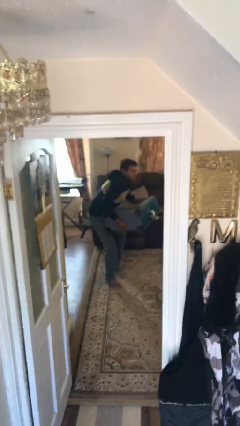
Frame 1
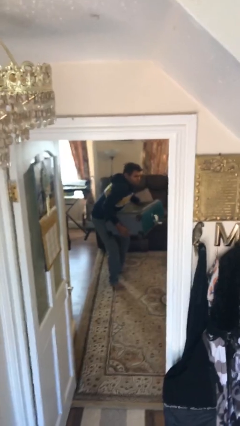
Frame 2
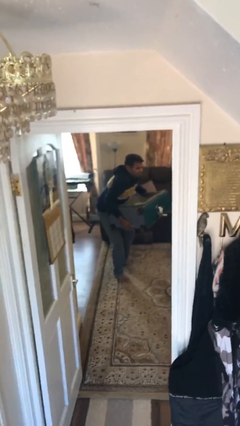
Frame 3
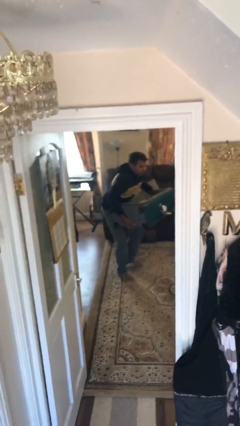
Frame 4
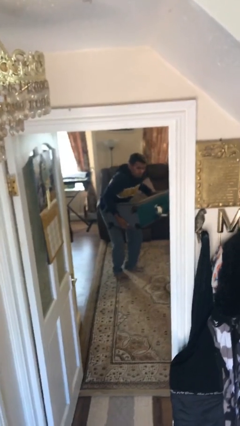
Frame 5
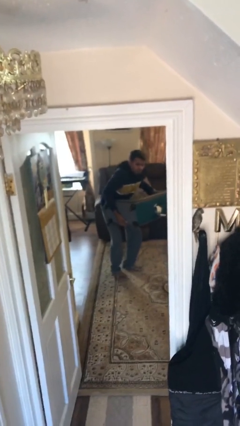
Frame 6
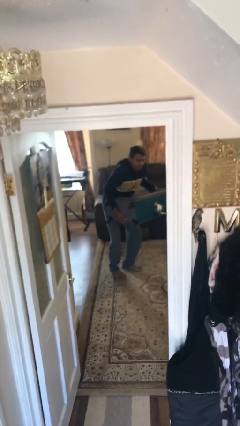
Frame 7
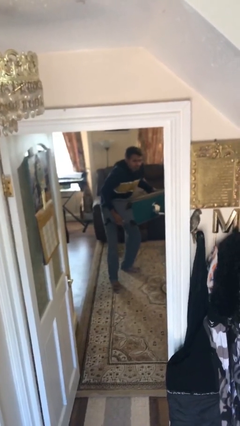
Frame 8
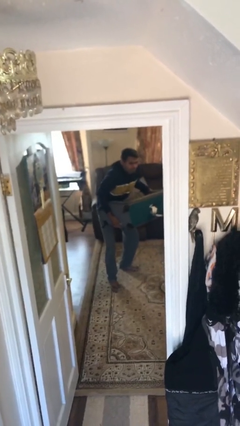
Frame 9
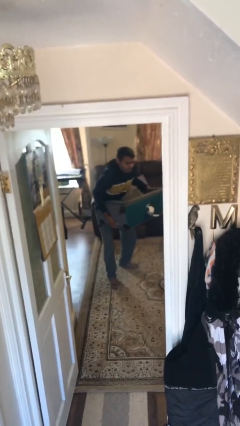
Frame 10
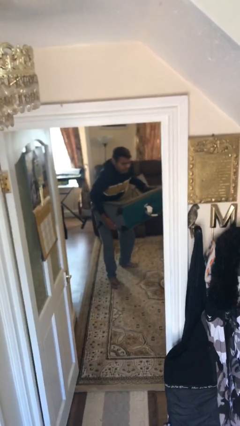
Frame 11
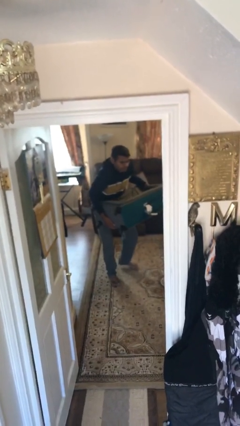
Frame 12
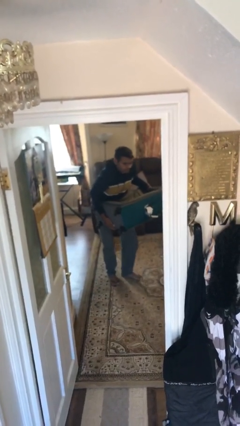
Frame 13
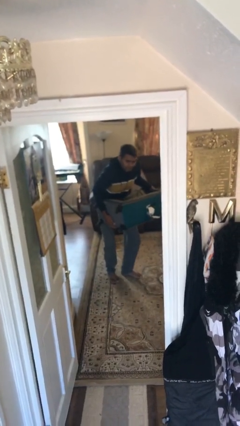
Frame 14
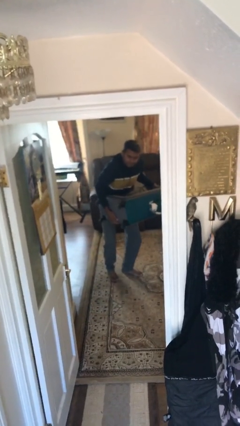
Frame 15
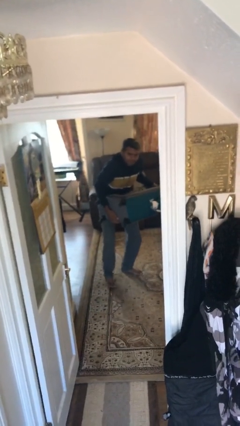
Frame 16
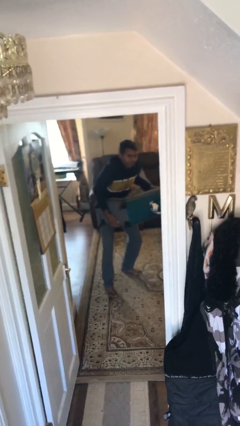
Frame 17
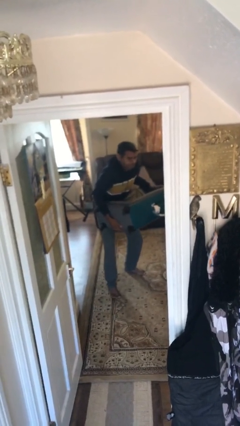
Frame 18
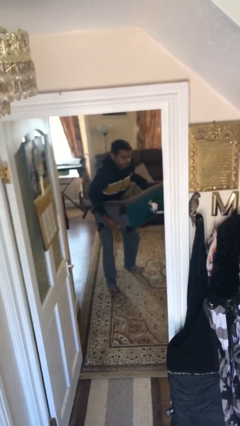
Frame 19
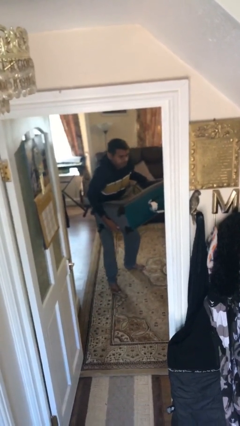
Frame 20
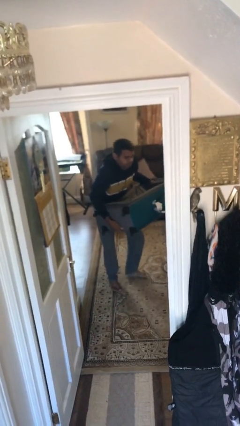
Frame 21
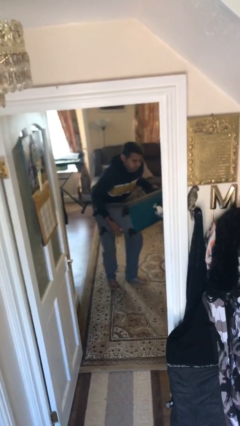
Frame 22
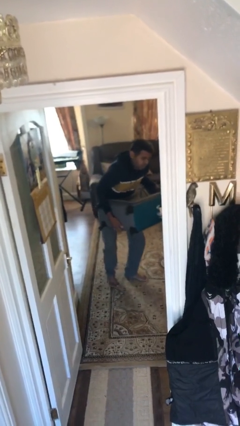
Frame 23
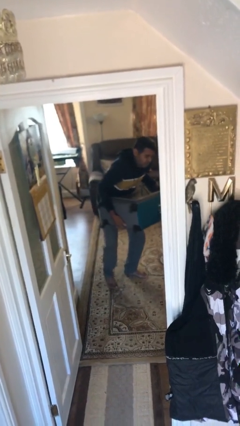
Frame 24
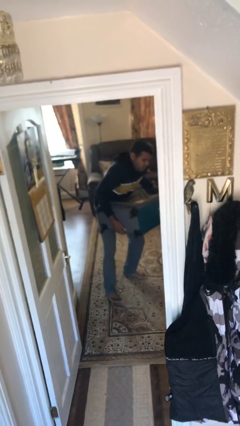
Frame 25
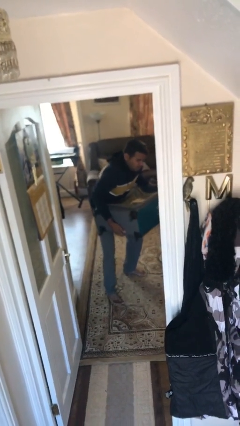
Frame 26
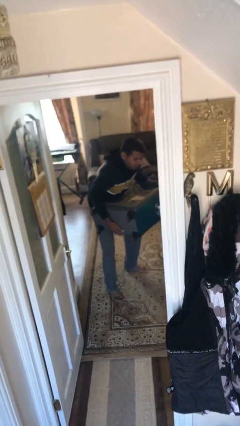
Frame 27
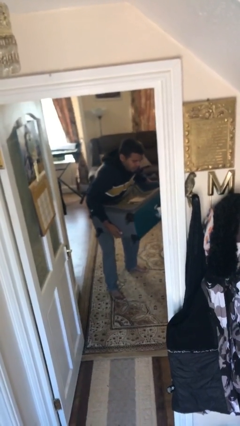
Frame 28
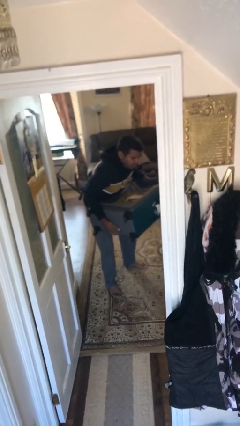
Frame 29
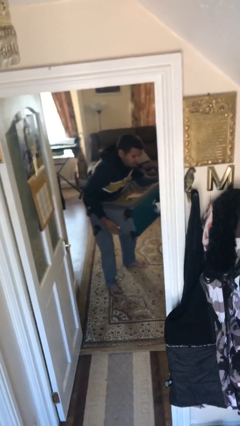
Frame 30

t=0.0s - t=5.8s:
person carries heavy object

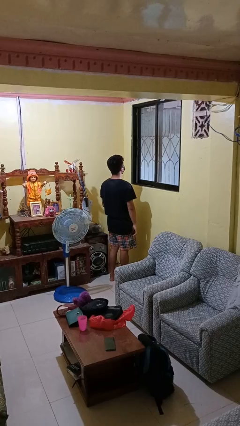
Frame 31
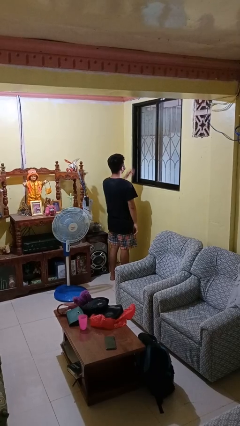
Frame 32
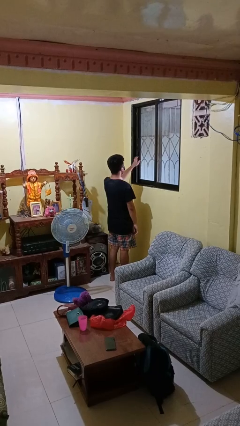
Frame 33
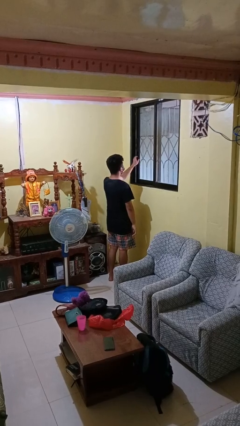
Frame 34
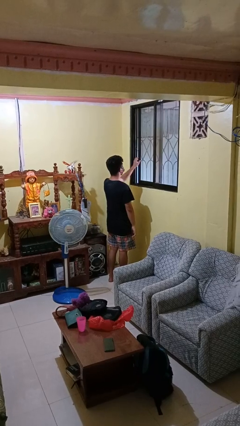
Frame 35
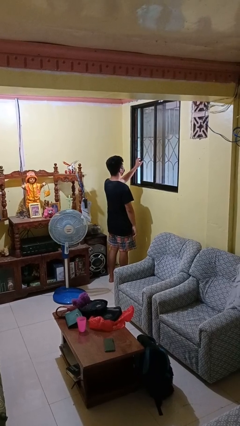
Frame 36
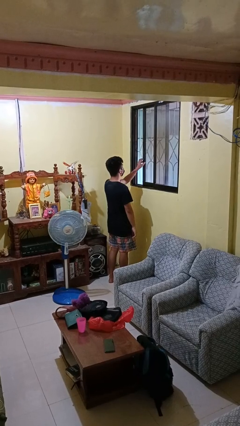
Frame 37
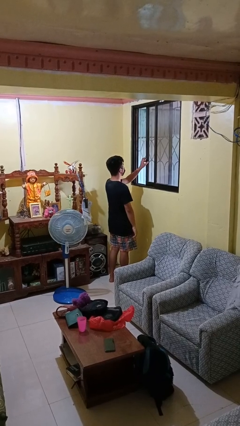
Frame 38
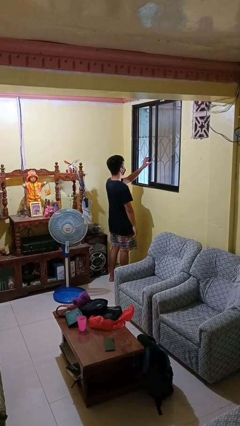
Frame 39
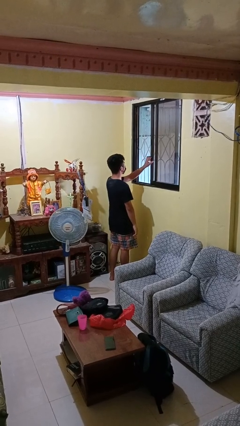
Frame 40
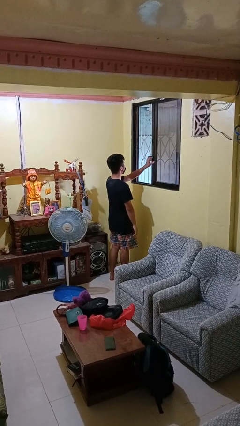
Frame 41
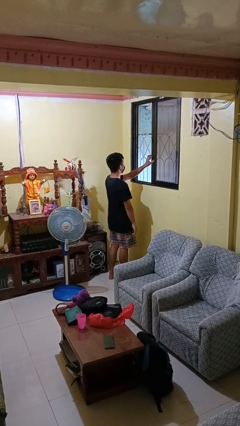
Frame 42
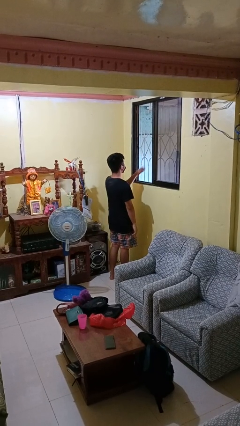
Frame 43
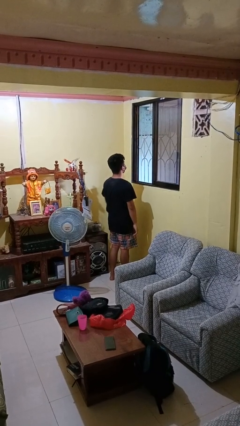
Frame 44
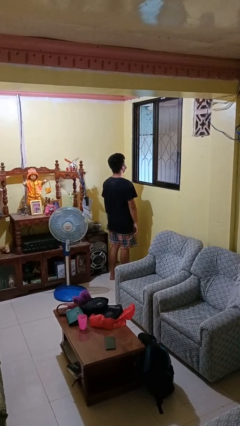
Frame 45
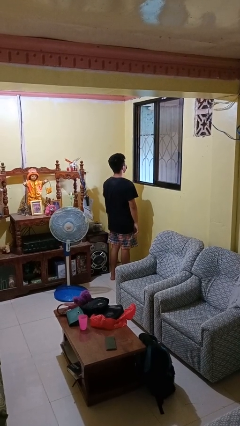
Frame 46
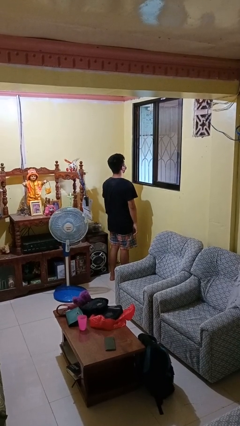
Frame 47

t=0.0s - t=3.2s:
person opens home window

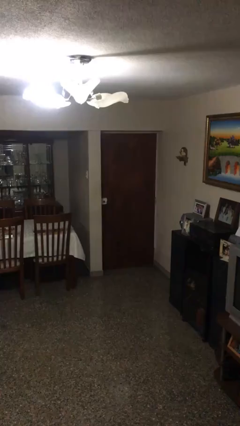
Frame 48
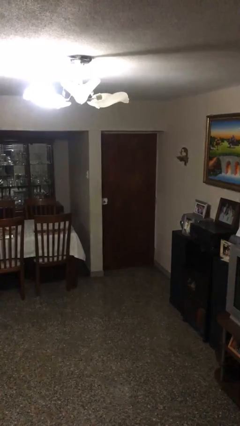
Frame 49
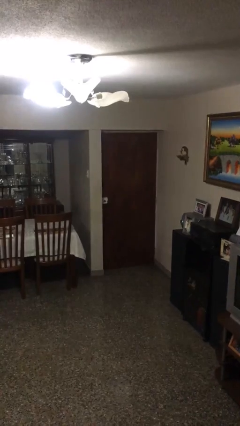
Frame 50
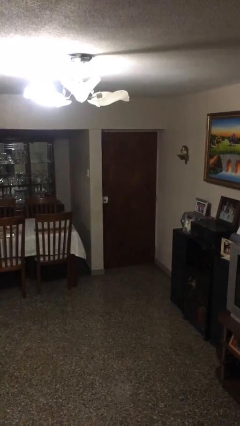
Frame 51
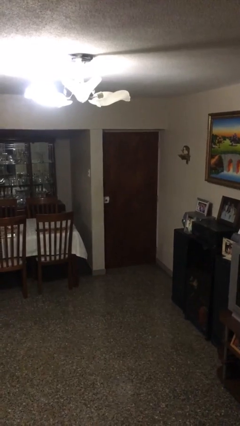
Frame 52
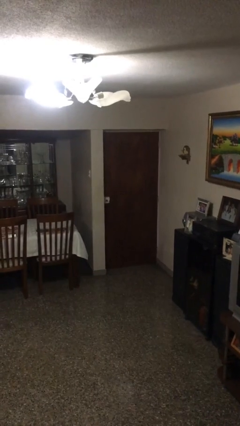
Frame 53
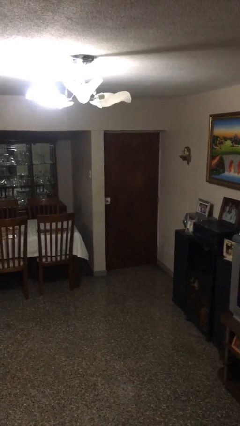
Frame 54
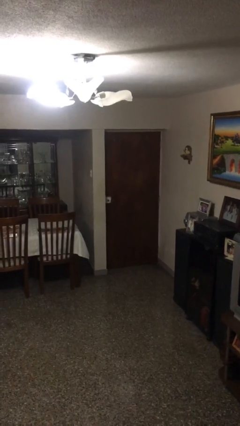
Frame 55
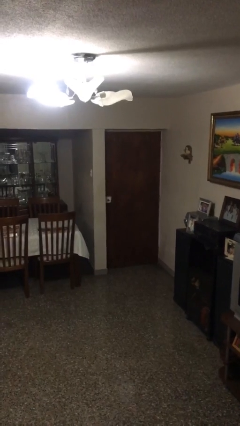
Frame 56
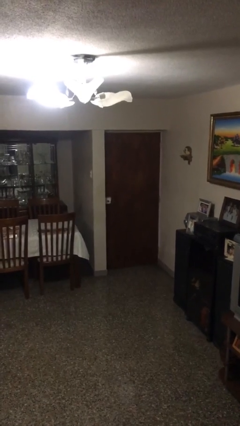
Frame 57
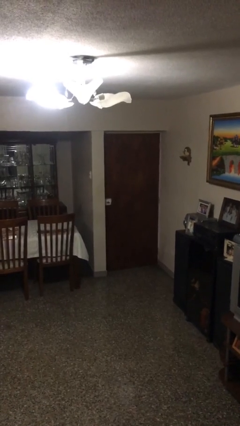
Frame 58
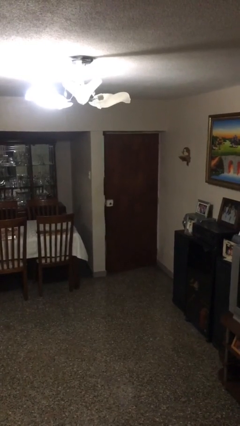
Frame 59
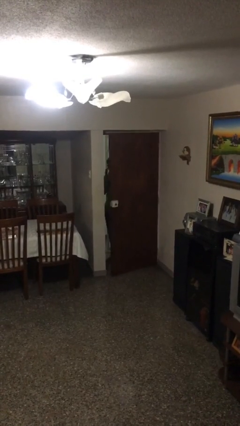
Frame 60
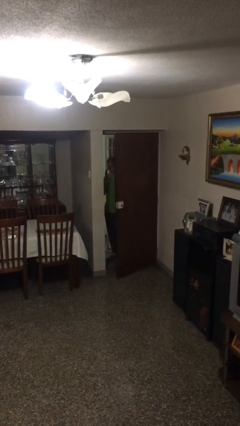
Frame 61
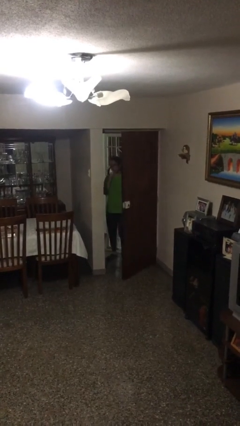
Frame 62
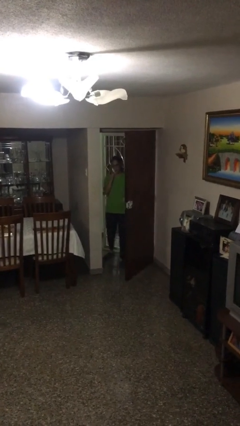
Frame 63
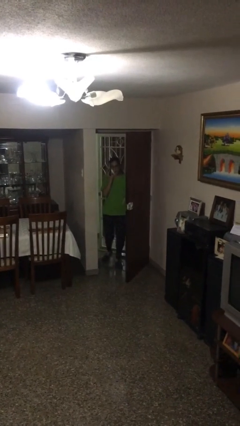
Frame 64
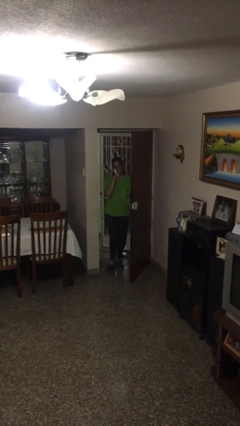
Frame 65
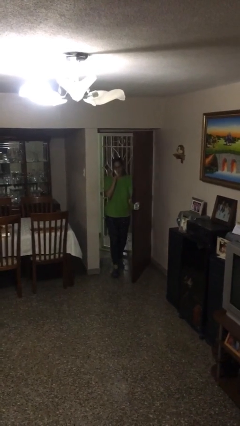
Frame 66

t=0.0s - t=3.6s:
person opens facility door

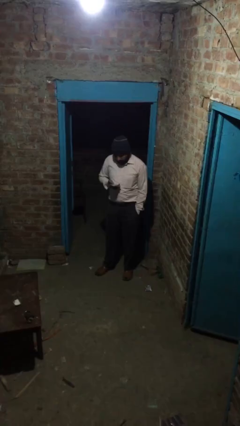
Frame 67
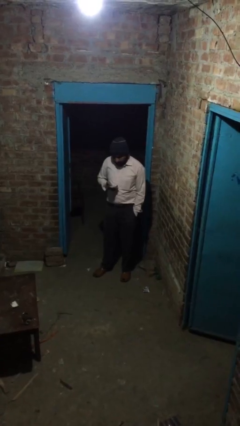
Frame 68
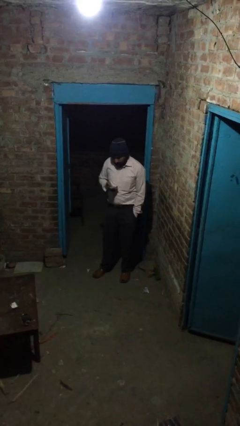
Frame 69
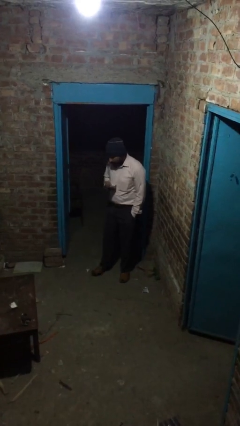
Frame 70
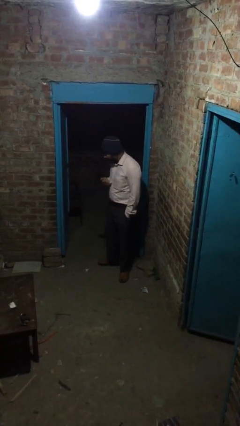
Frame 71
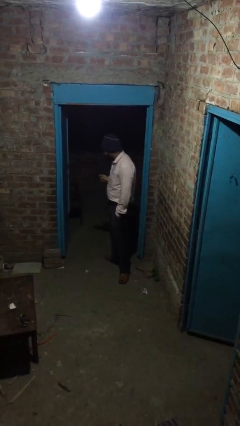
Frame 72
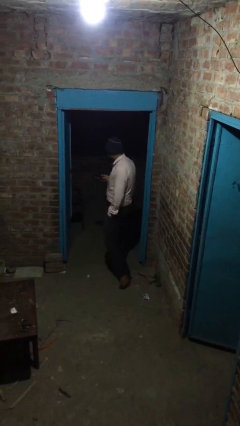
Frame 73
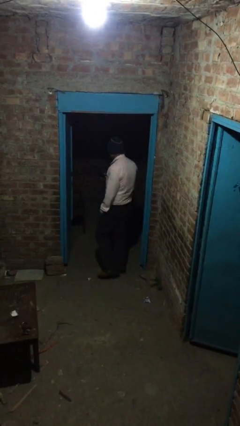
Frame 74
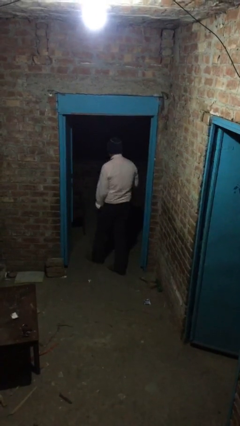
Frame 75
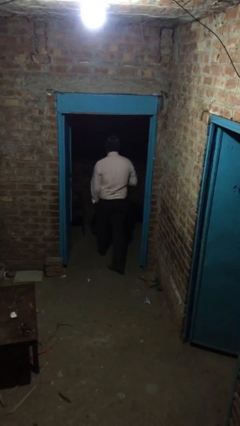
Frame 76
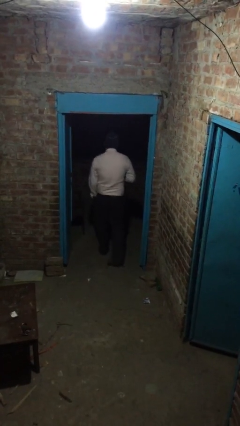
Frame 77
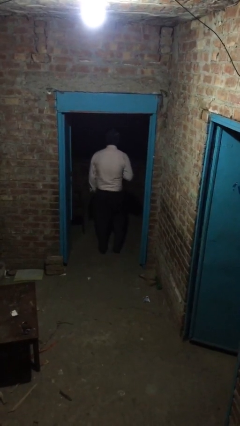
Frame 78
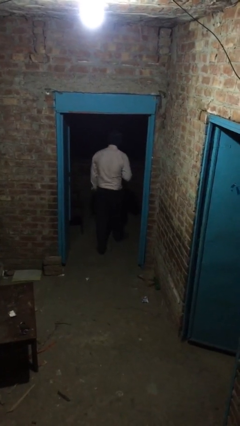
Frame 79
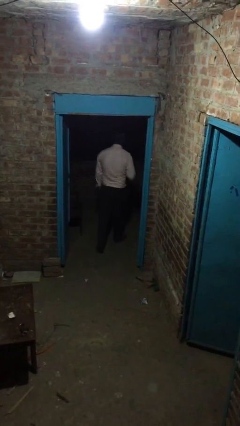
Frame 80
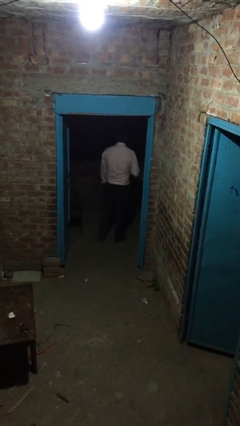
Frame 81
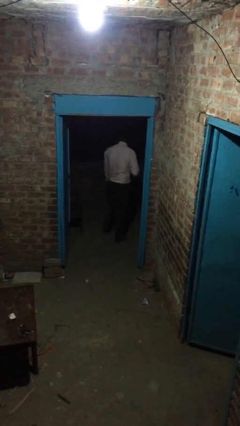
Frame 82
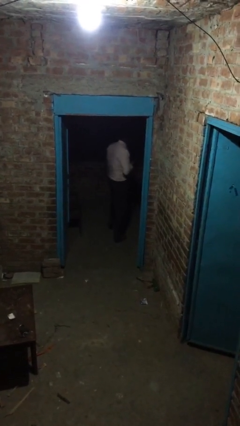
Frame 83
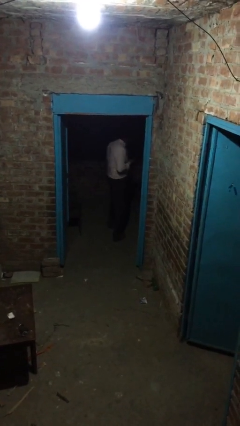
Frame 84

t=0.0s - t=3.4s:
person exits scene through structure

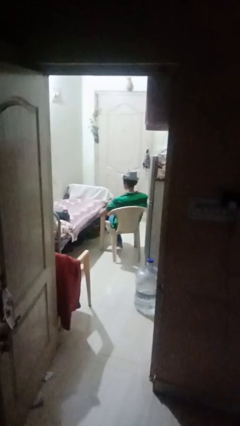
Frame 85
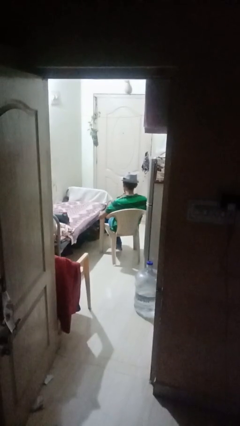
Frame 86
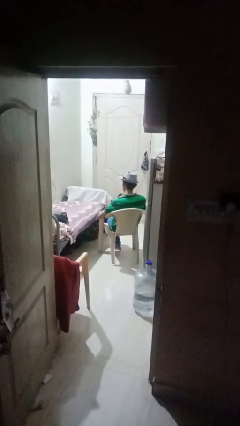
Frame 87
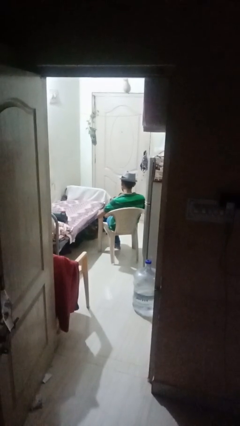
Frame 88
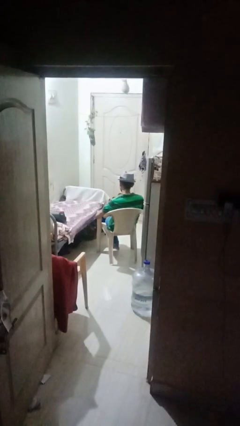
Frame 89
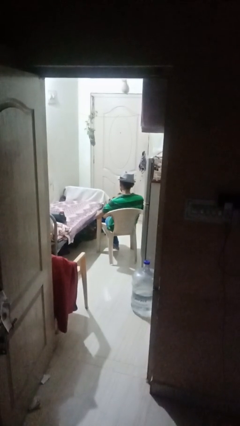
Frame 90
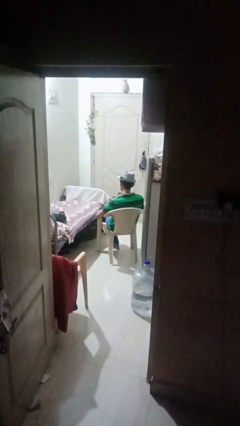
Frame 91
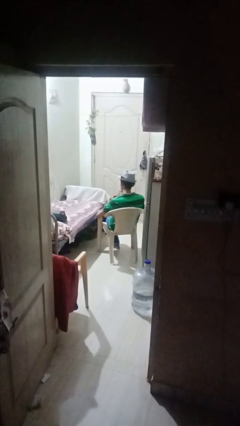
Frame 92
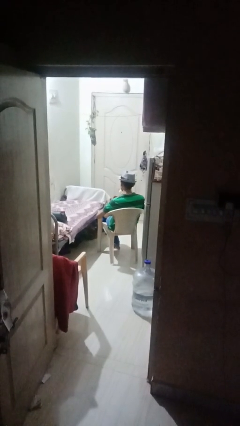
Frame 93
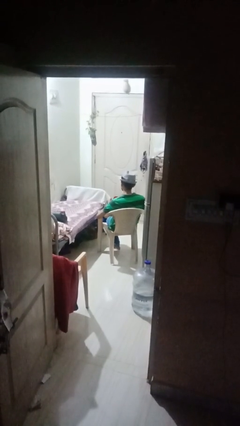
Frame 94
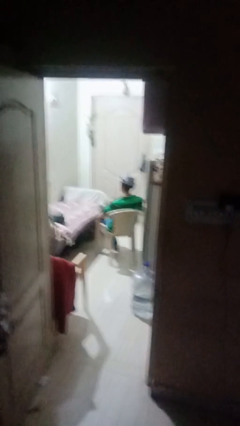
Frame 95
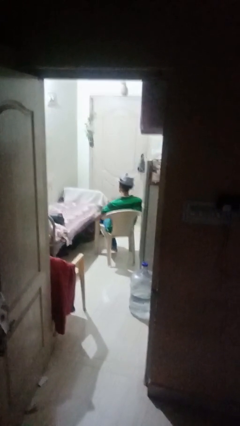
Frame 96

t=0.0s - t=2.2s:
person stirs mug
